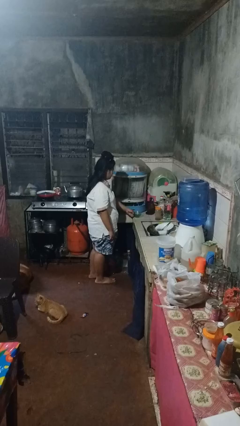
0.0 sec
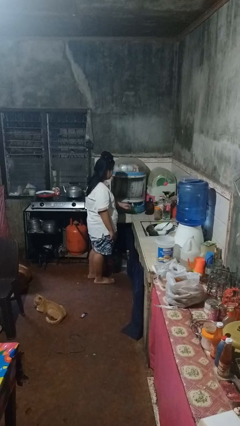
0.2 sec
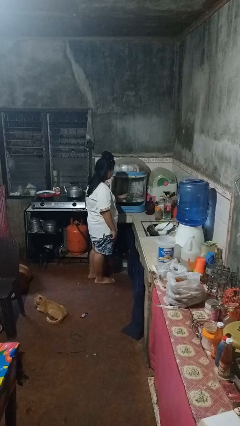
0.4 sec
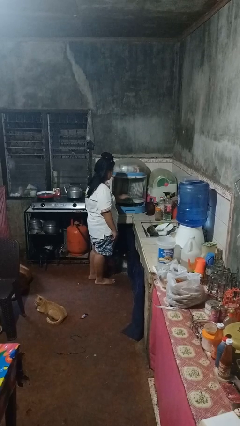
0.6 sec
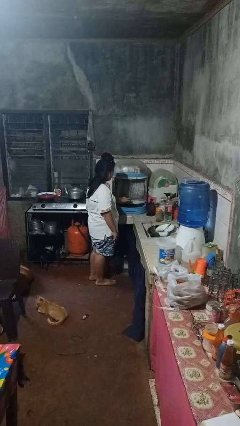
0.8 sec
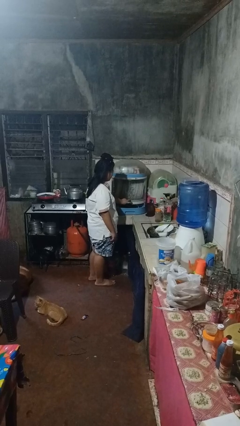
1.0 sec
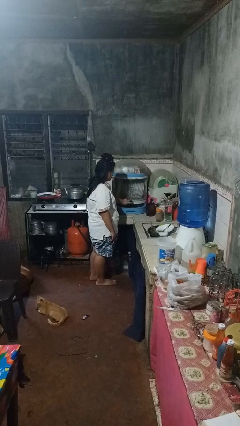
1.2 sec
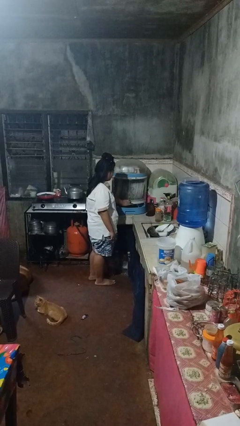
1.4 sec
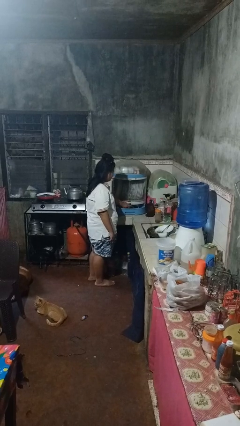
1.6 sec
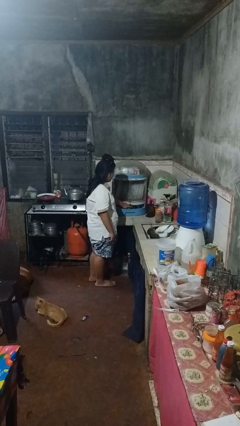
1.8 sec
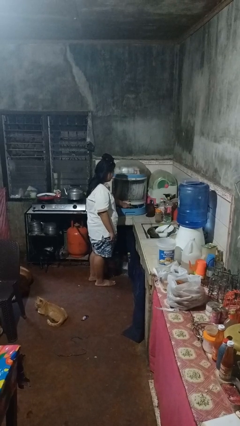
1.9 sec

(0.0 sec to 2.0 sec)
person puts object into kitchen drawer

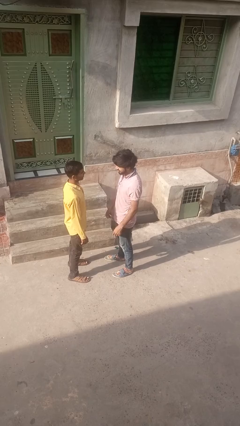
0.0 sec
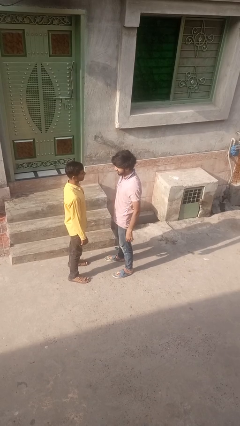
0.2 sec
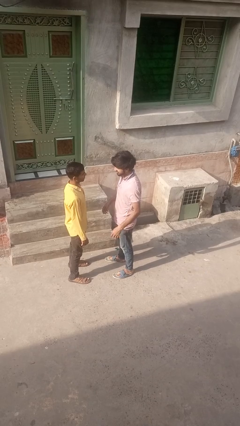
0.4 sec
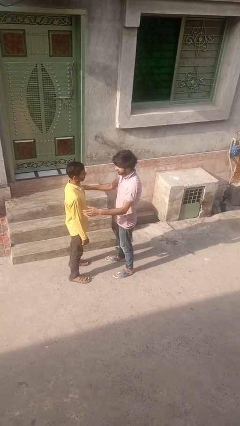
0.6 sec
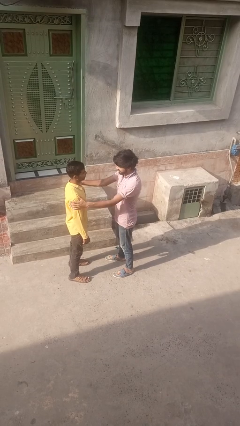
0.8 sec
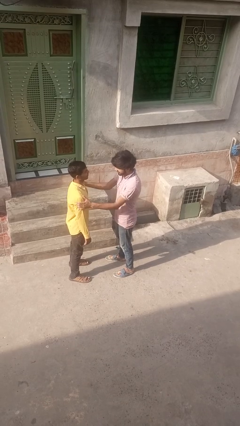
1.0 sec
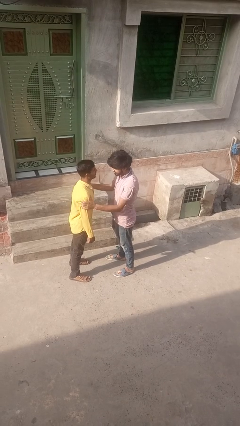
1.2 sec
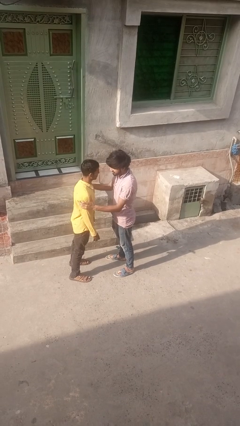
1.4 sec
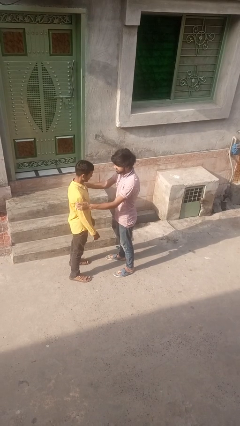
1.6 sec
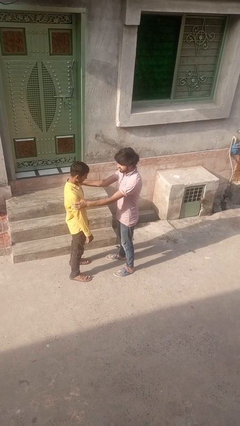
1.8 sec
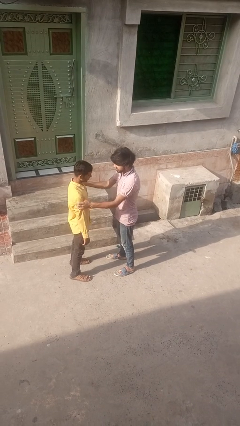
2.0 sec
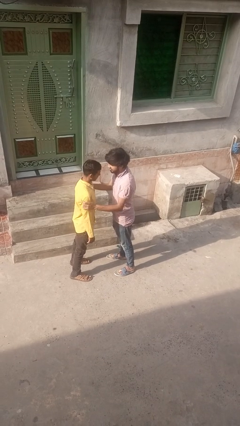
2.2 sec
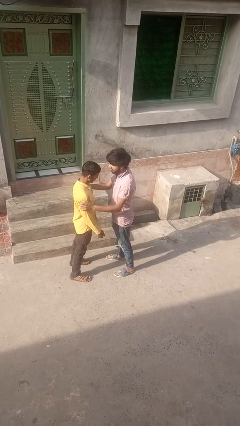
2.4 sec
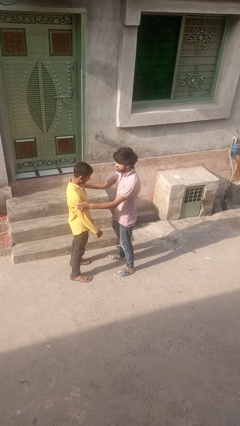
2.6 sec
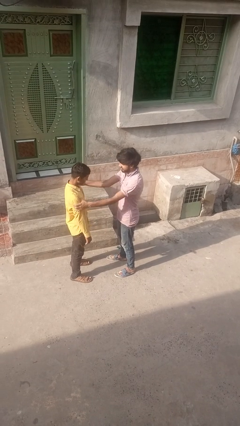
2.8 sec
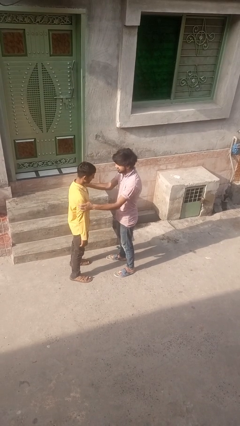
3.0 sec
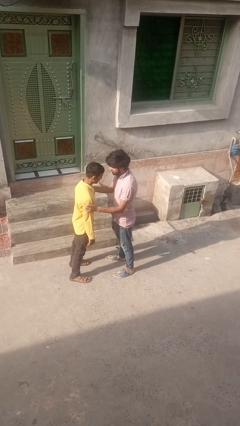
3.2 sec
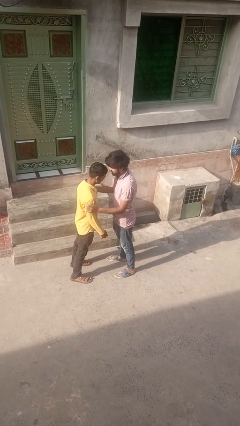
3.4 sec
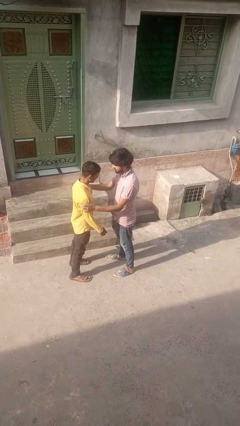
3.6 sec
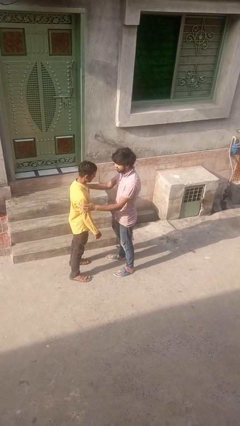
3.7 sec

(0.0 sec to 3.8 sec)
person grabs person by bicep

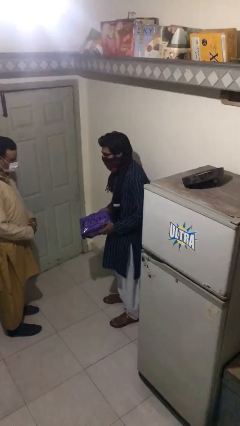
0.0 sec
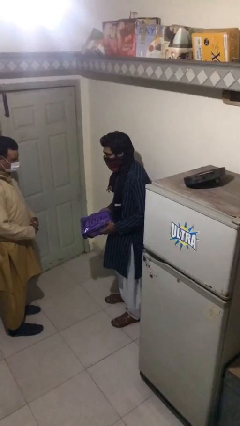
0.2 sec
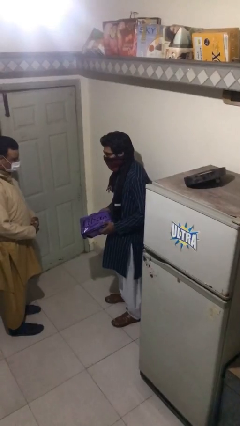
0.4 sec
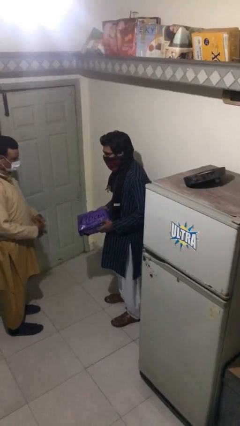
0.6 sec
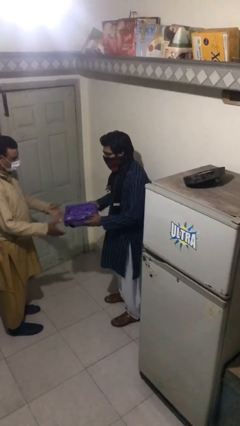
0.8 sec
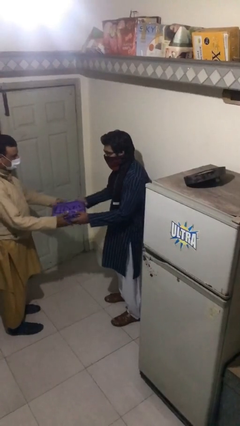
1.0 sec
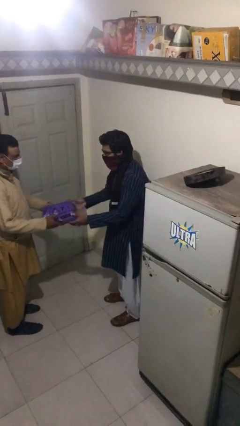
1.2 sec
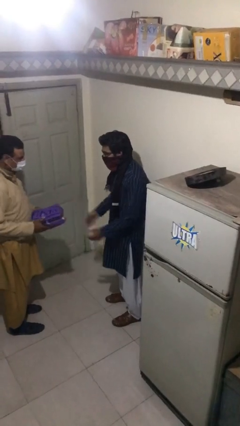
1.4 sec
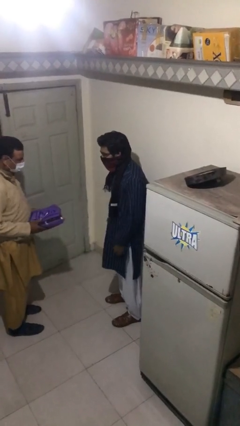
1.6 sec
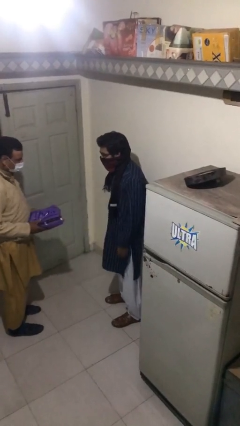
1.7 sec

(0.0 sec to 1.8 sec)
person transfers object to person

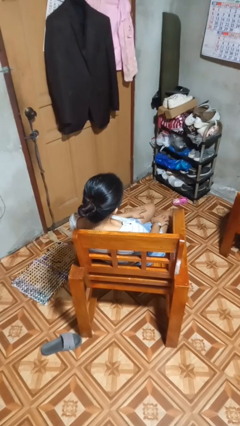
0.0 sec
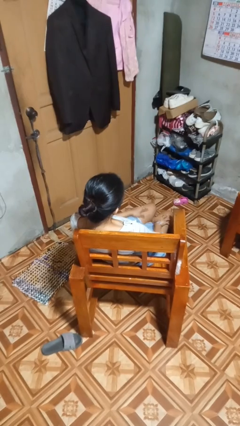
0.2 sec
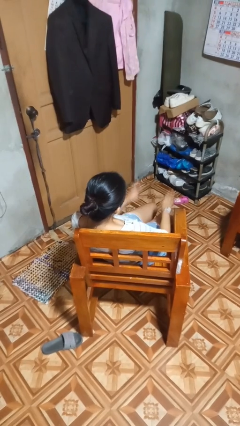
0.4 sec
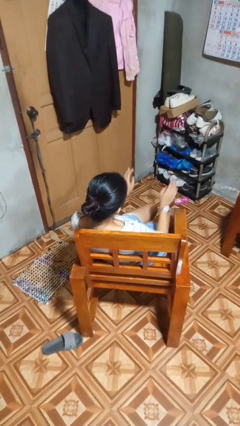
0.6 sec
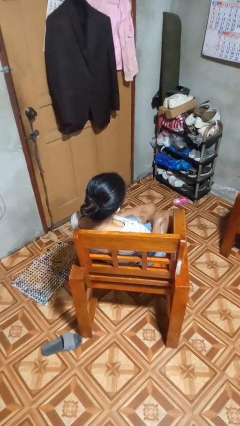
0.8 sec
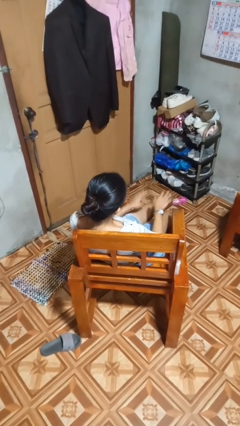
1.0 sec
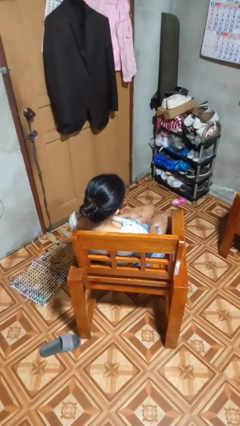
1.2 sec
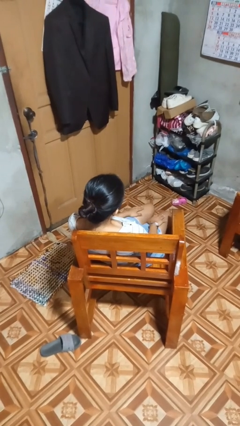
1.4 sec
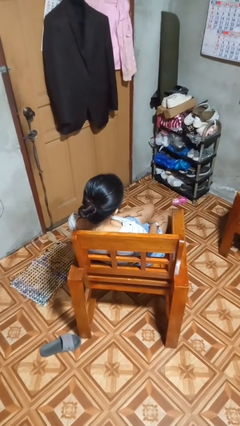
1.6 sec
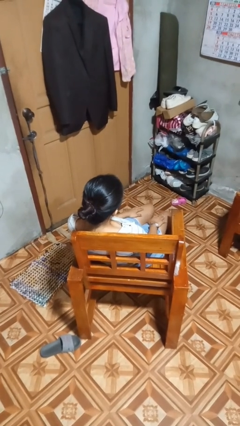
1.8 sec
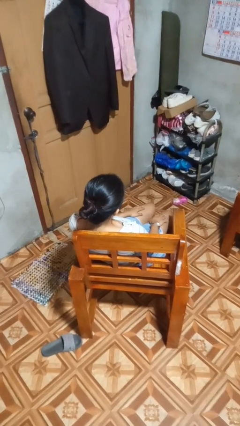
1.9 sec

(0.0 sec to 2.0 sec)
person slaps hands on thighs

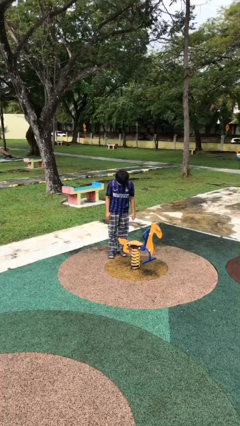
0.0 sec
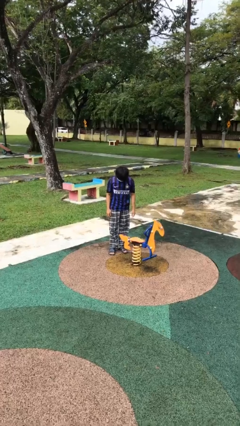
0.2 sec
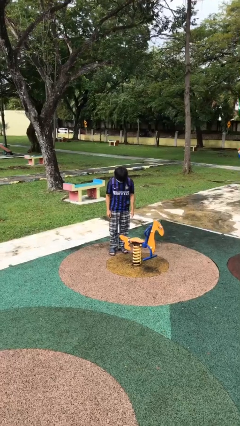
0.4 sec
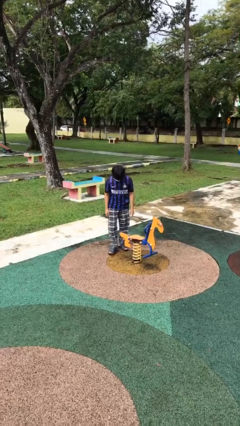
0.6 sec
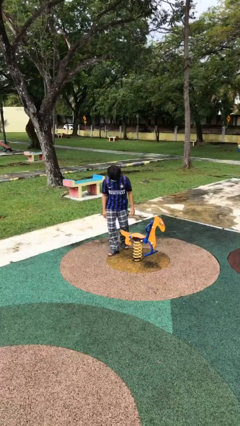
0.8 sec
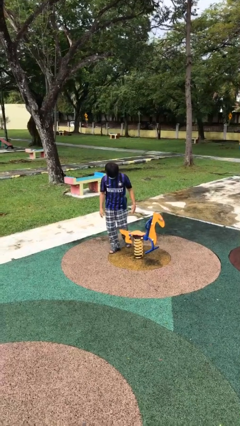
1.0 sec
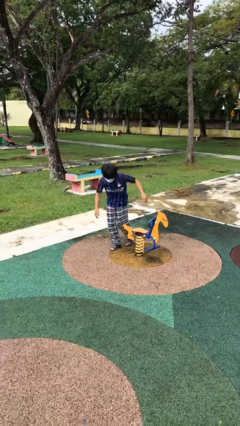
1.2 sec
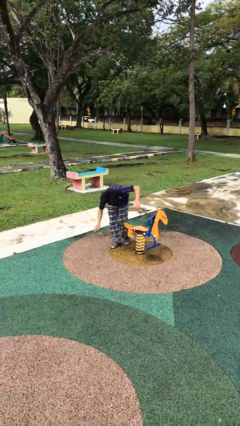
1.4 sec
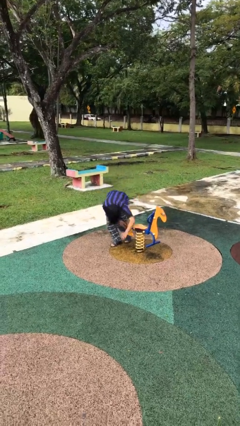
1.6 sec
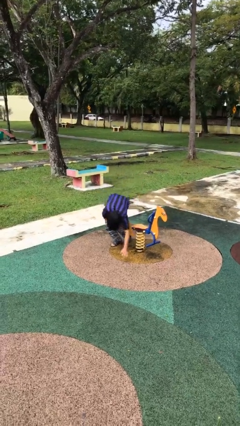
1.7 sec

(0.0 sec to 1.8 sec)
person trips on object on floor

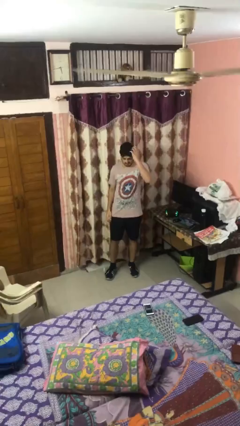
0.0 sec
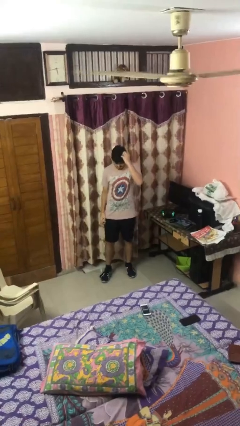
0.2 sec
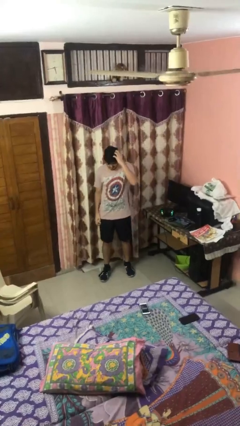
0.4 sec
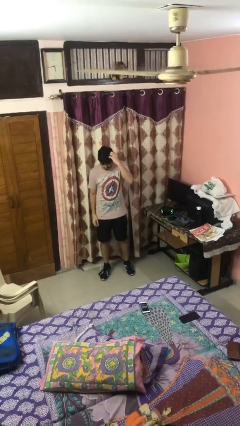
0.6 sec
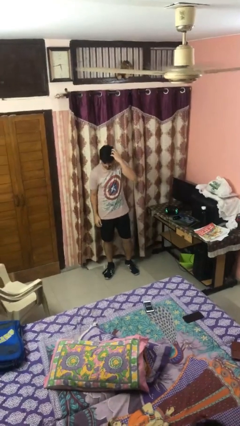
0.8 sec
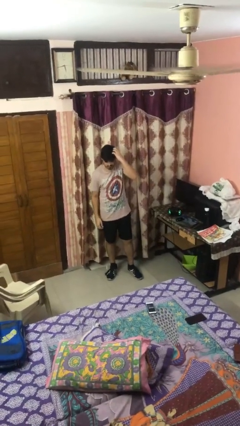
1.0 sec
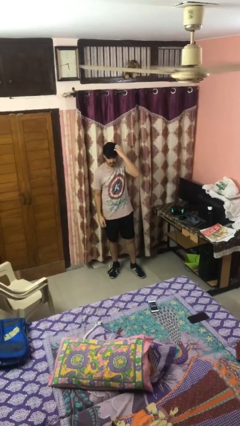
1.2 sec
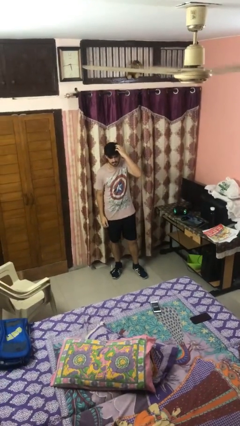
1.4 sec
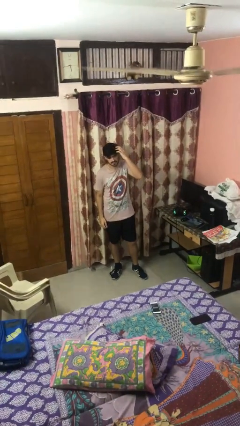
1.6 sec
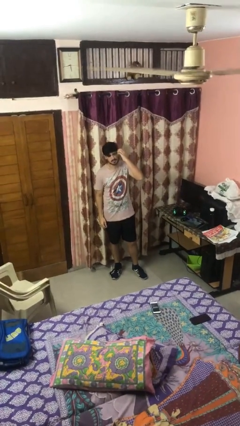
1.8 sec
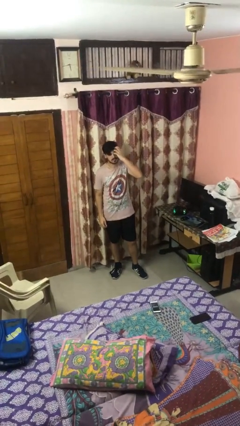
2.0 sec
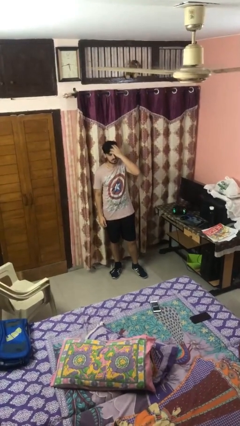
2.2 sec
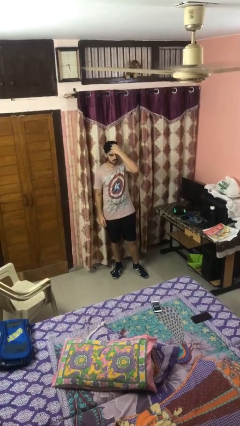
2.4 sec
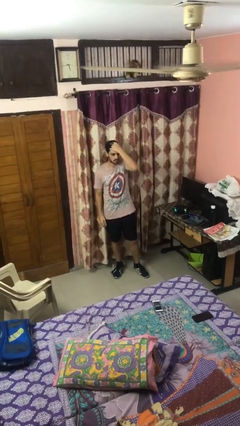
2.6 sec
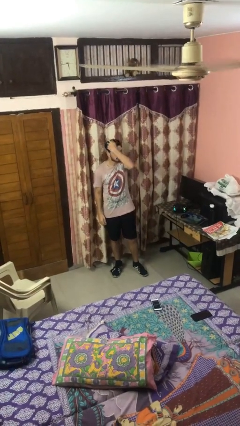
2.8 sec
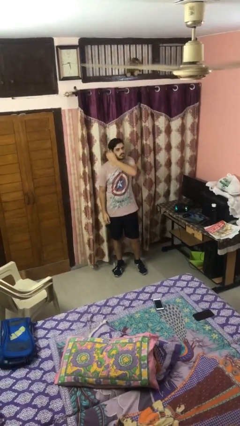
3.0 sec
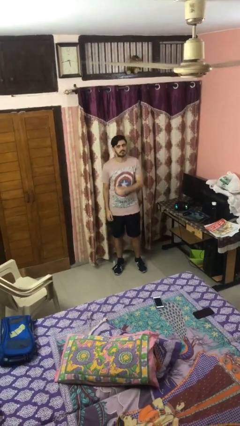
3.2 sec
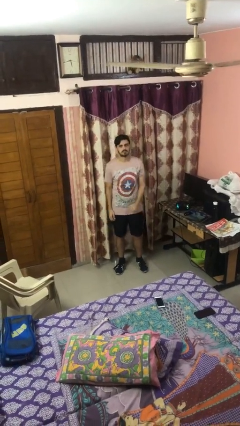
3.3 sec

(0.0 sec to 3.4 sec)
person scratches face

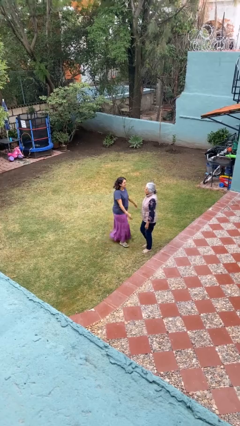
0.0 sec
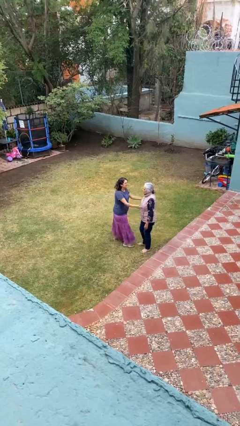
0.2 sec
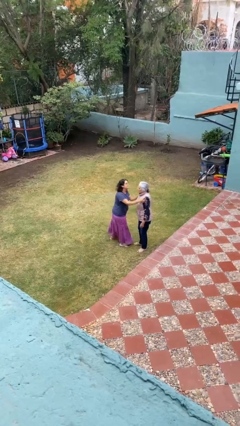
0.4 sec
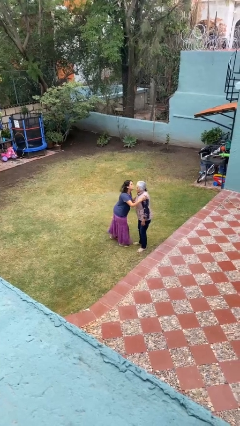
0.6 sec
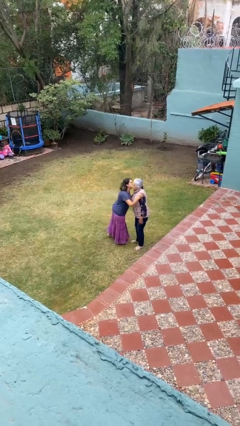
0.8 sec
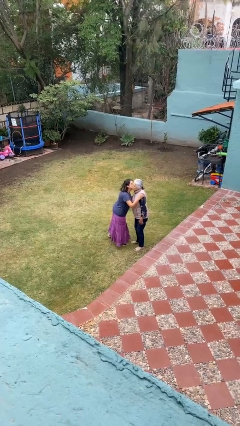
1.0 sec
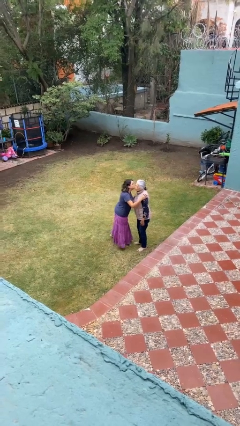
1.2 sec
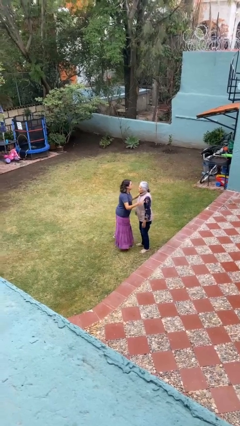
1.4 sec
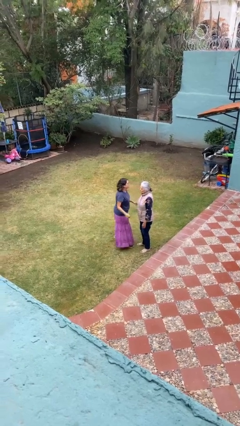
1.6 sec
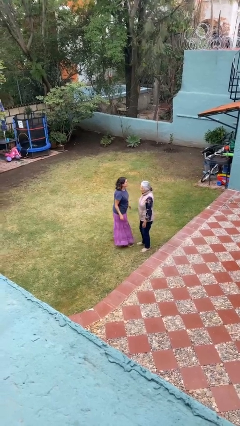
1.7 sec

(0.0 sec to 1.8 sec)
person kisses cheek of person

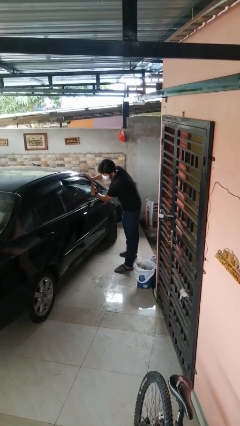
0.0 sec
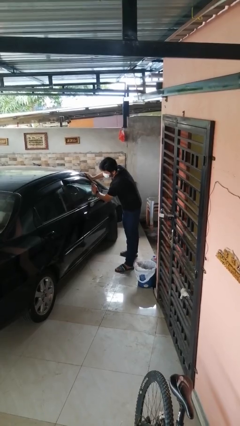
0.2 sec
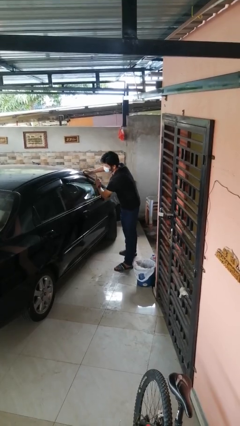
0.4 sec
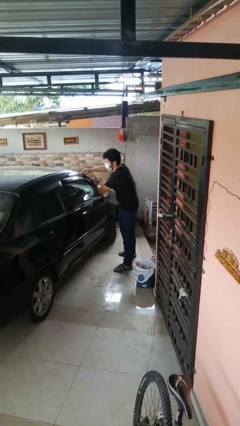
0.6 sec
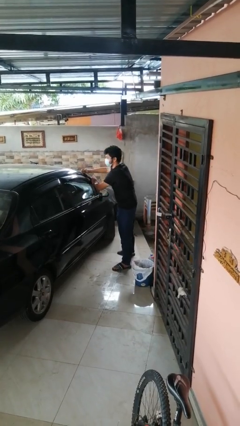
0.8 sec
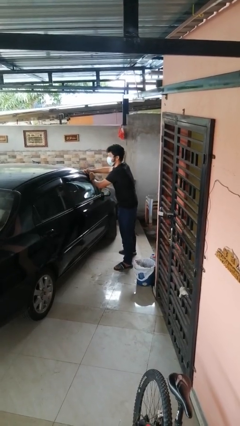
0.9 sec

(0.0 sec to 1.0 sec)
person polishes car with rag
